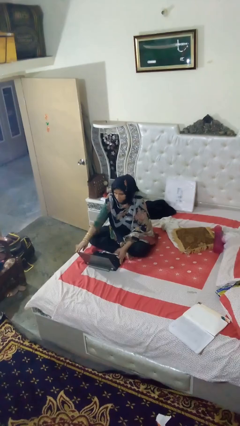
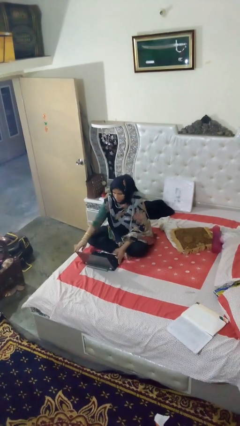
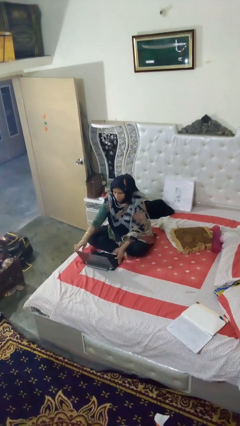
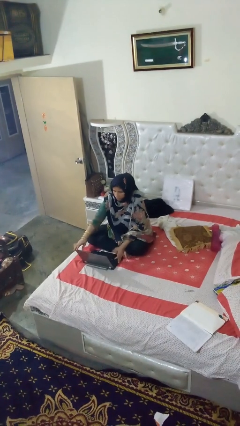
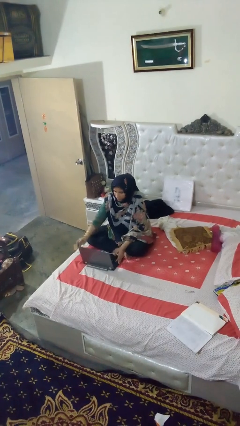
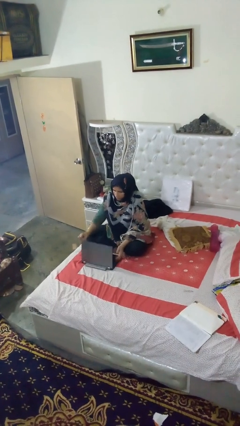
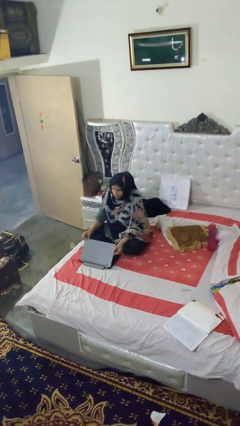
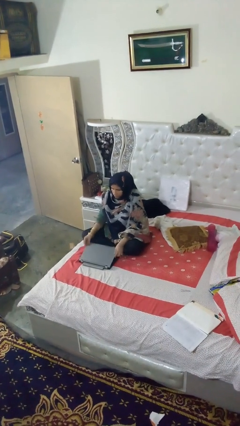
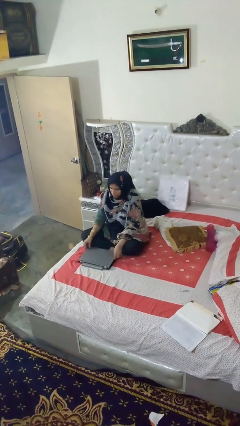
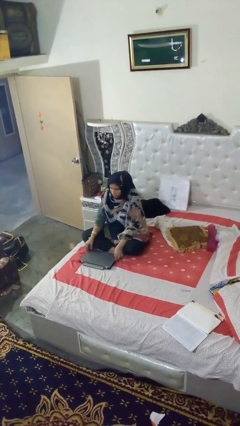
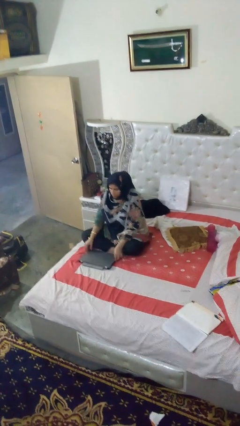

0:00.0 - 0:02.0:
person closes laptop

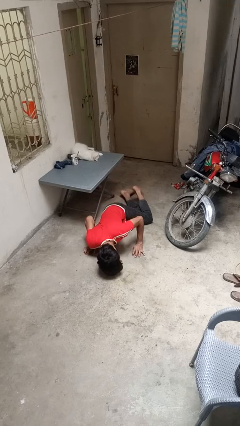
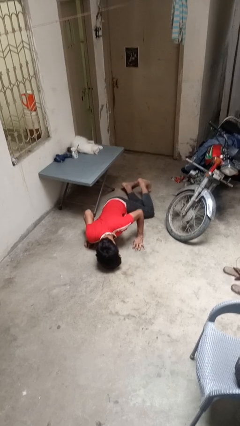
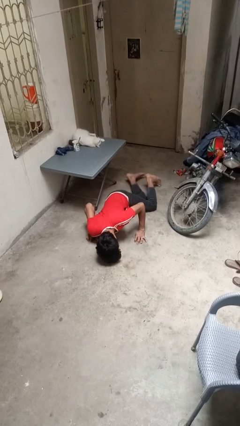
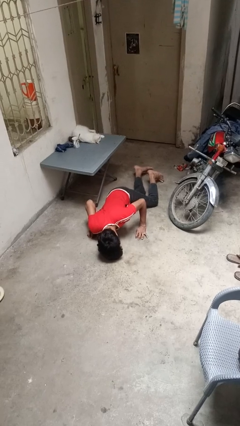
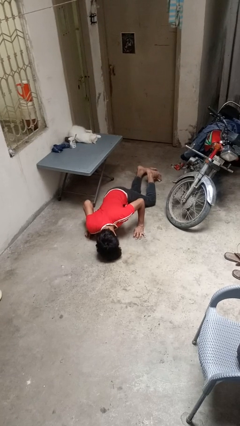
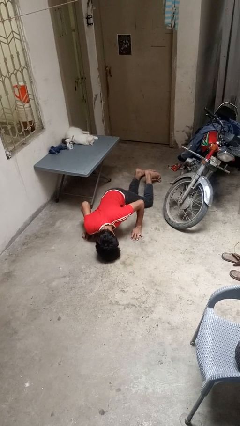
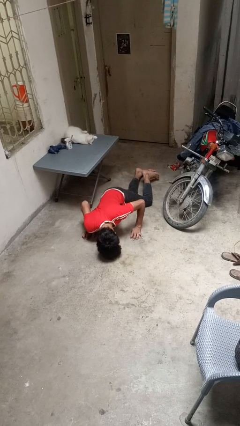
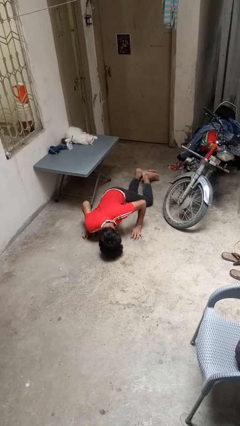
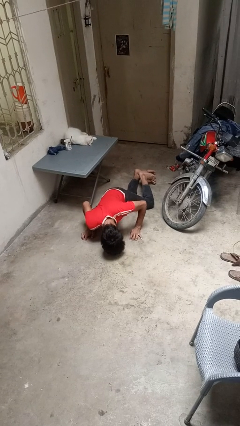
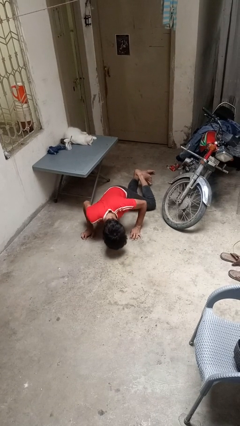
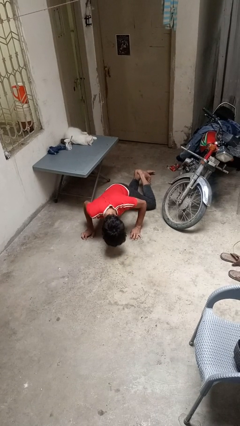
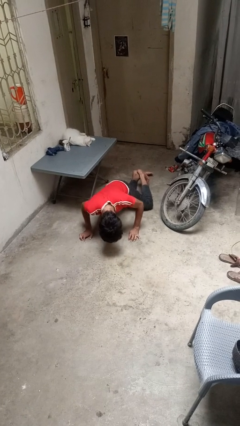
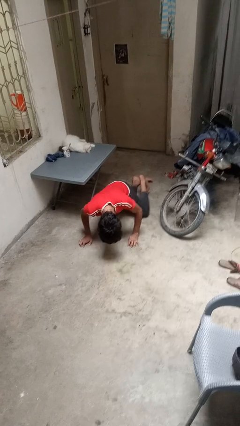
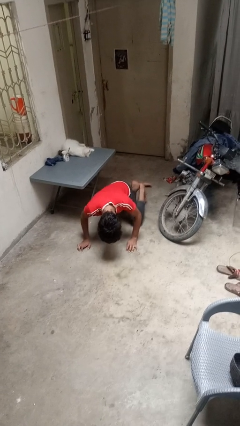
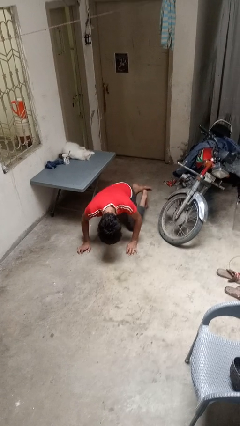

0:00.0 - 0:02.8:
person lies down on floor

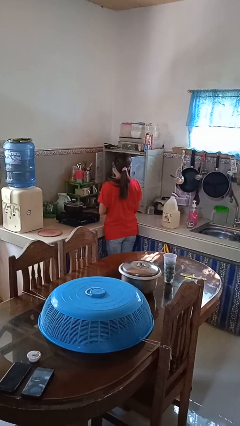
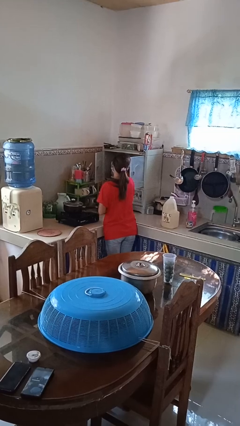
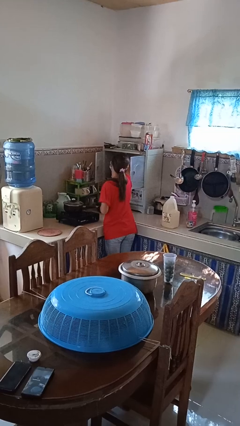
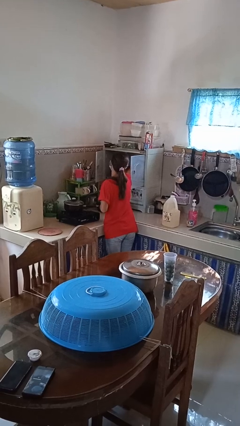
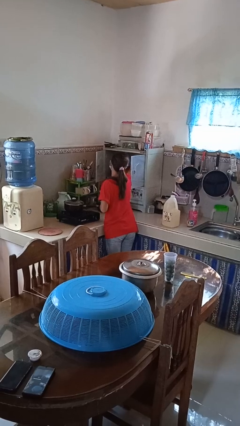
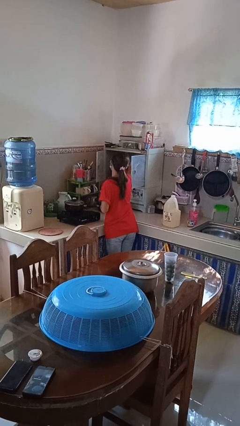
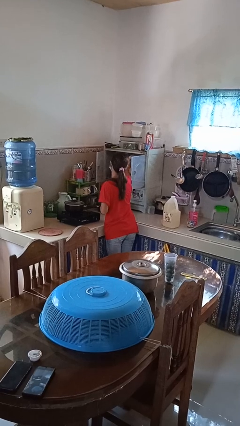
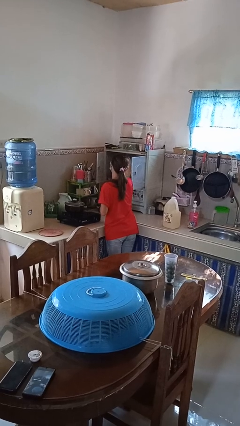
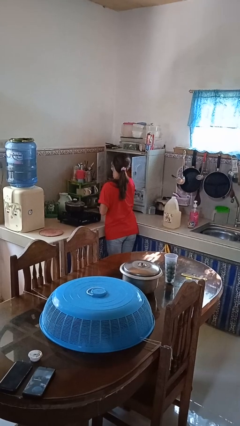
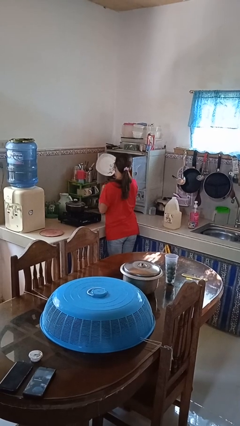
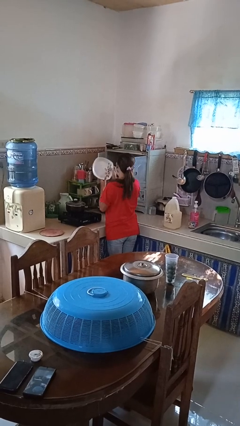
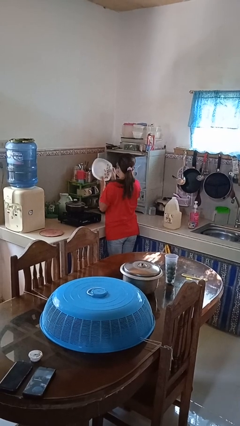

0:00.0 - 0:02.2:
person takes object from cabinet

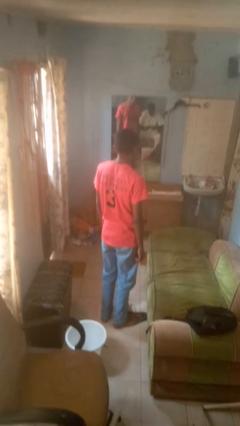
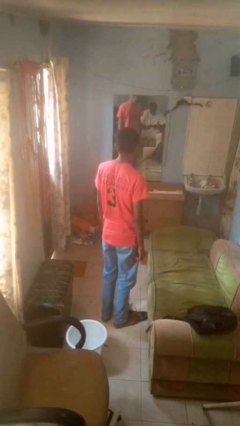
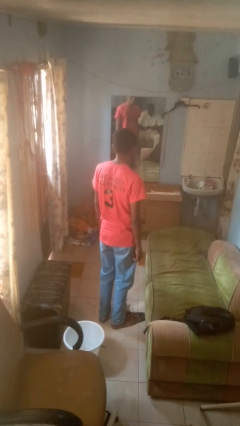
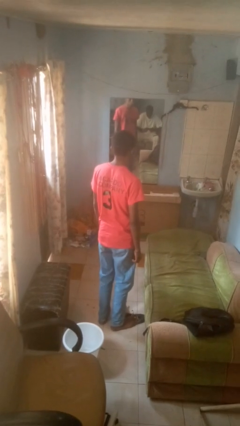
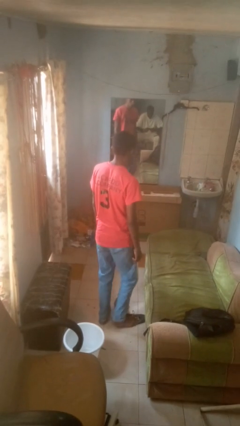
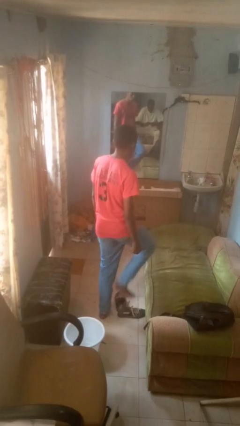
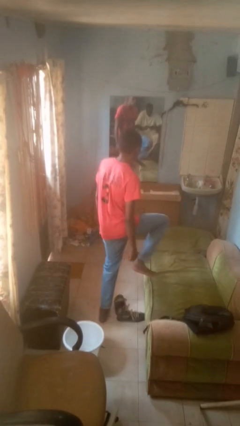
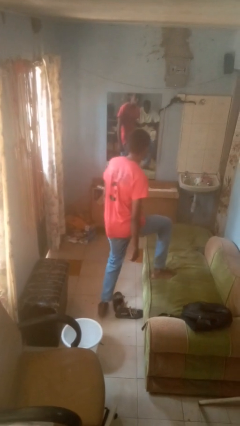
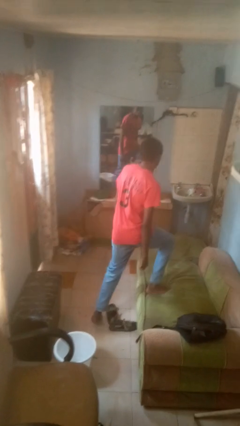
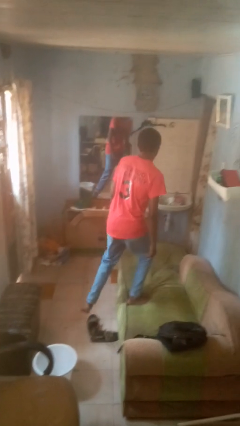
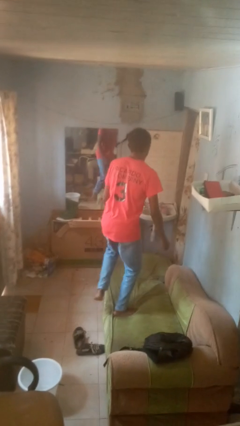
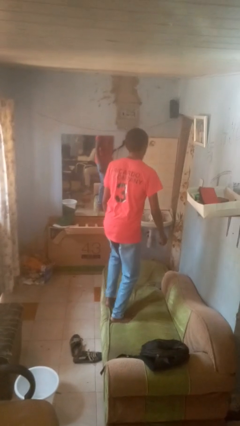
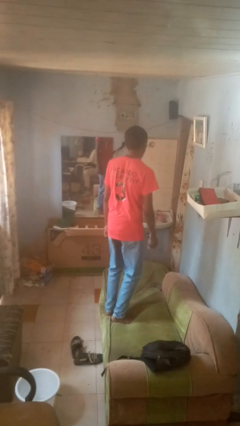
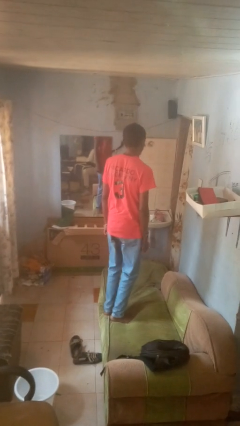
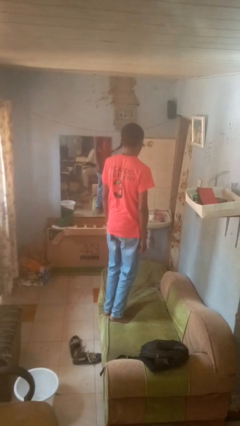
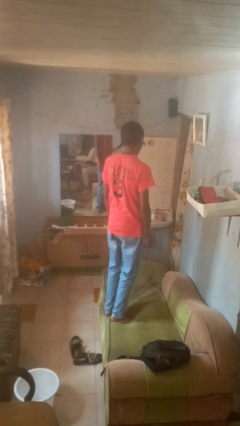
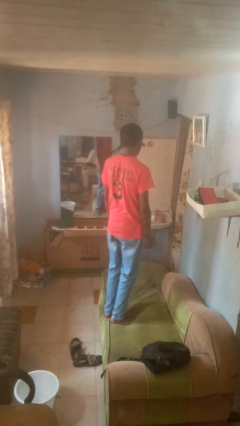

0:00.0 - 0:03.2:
person climbs on couch

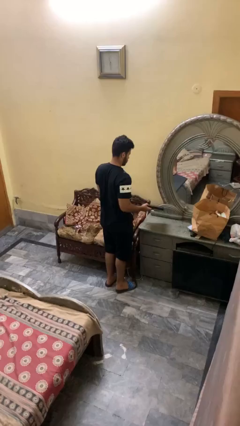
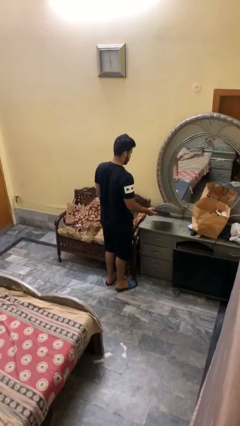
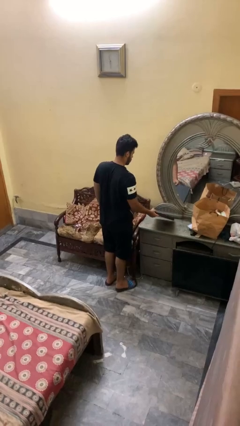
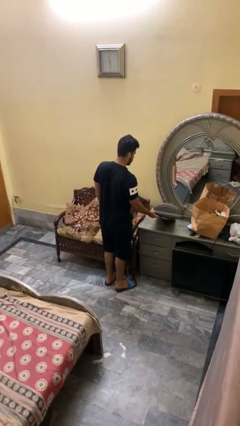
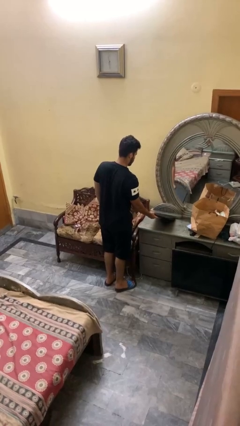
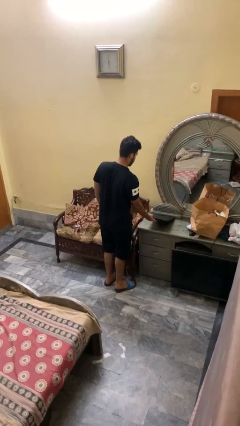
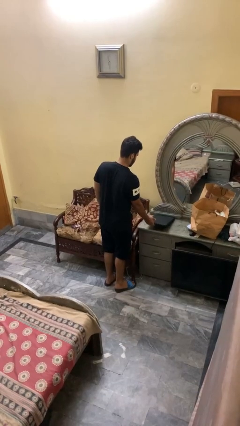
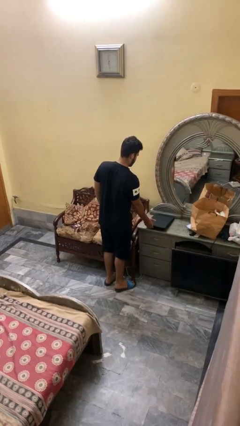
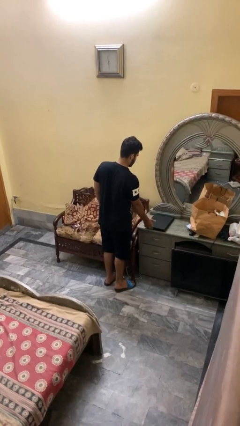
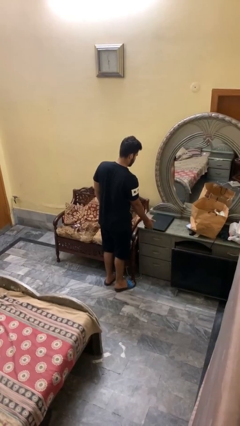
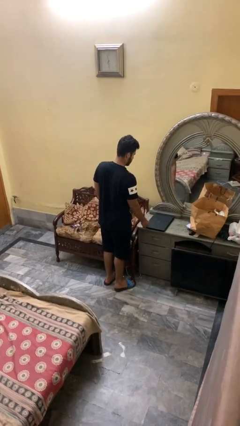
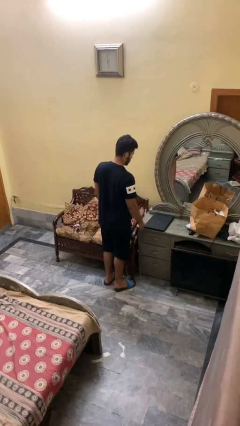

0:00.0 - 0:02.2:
person puts down object on countertop

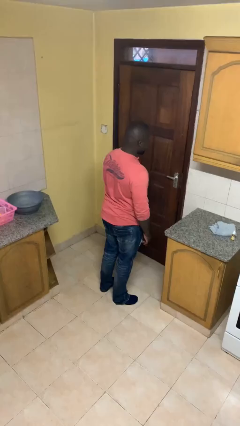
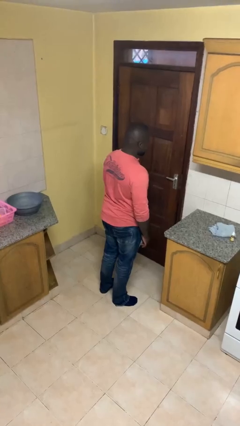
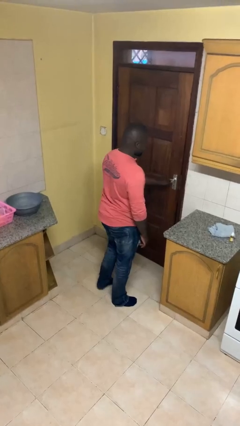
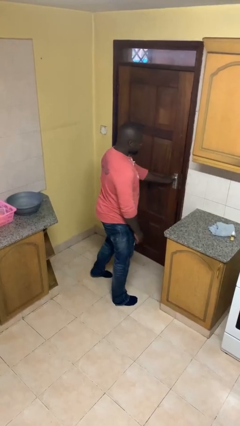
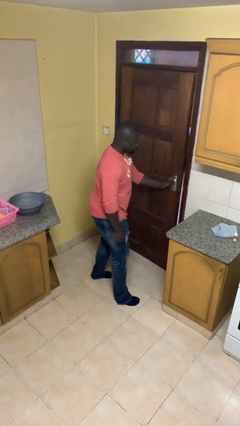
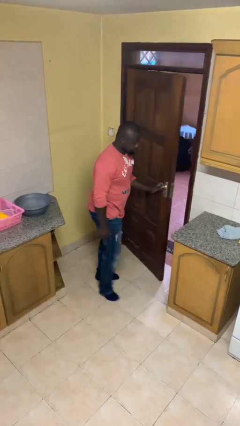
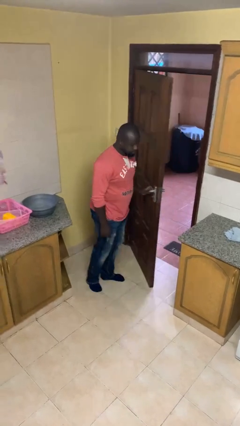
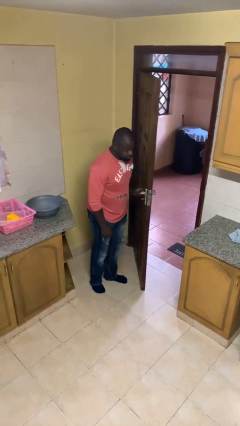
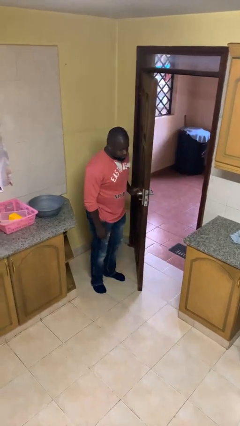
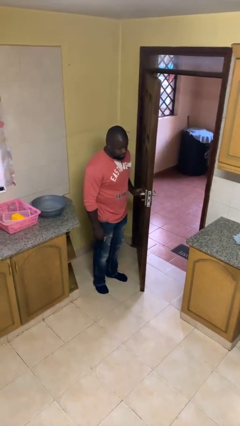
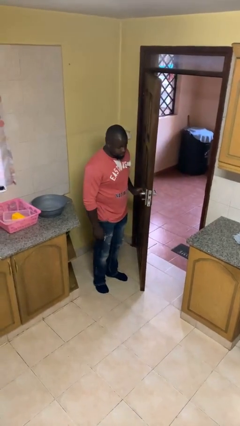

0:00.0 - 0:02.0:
person opens facility door

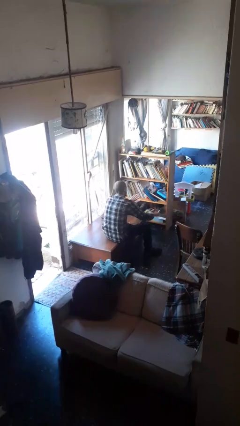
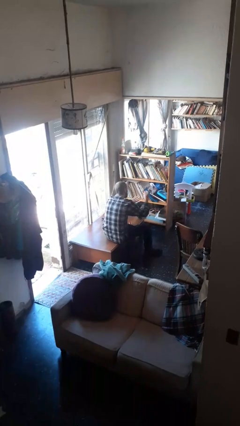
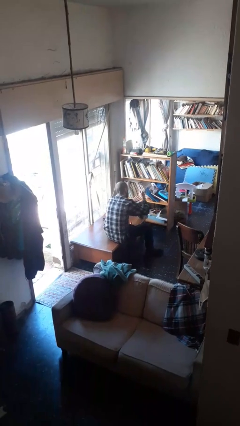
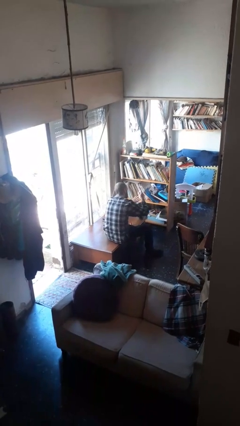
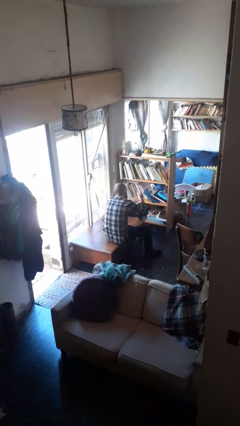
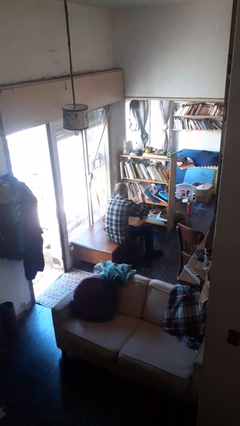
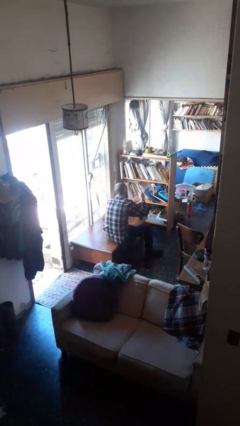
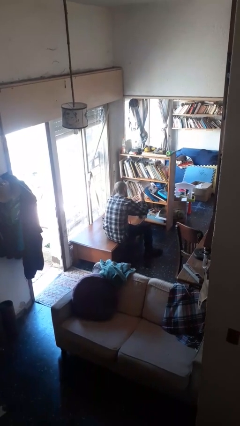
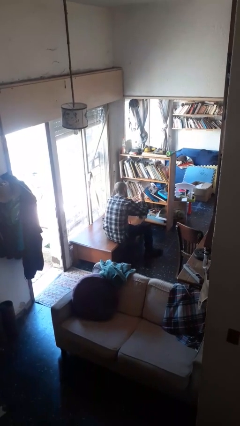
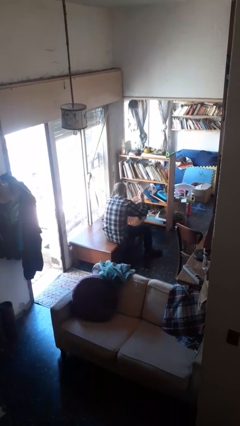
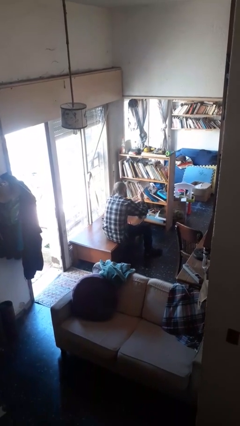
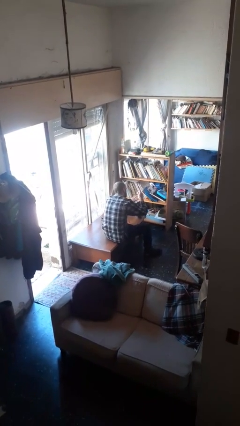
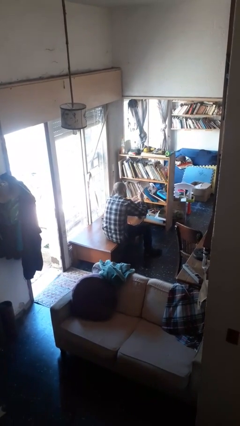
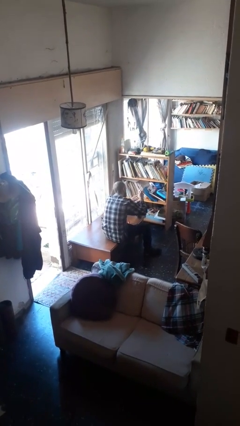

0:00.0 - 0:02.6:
person paints fingernails

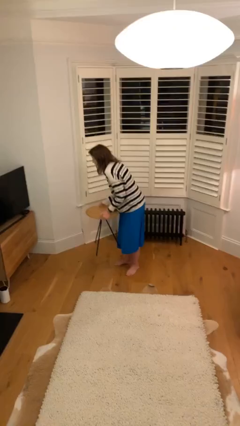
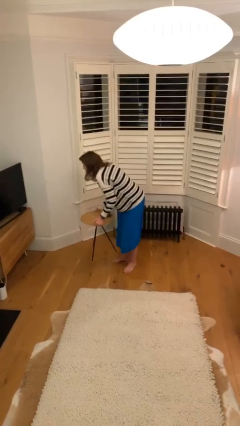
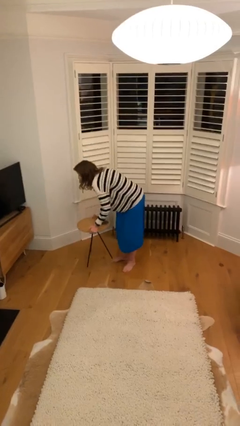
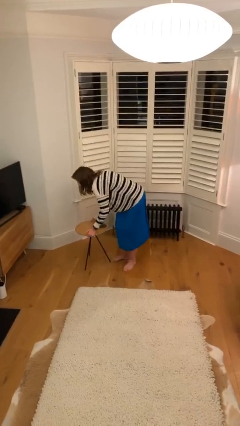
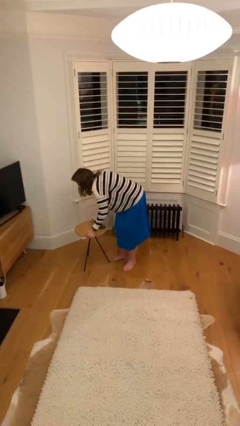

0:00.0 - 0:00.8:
person puts down object on floor
